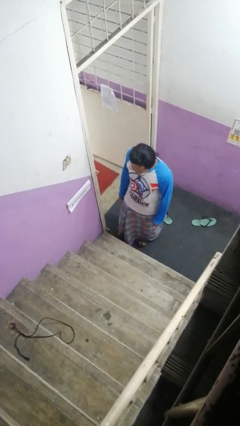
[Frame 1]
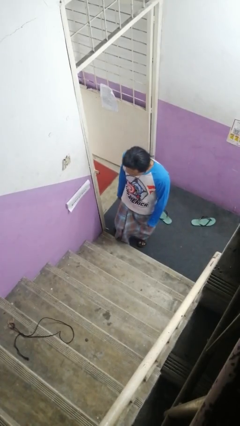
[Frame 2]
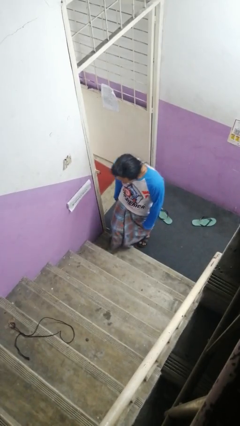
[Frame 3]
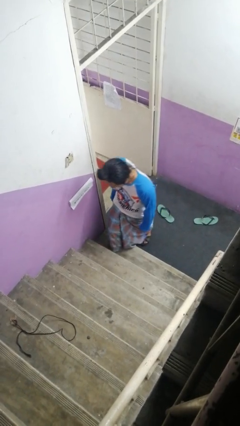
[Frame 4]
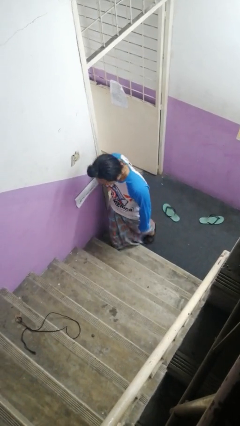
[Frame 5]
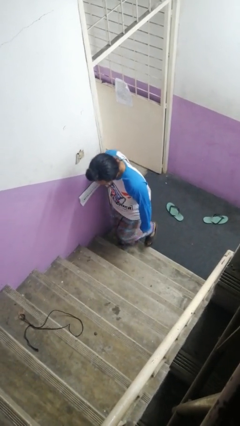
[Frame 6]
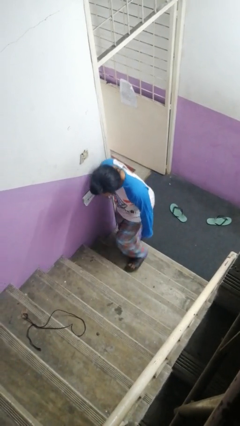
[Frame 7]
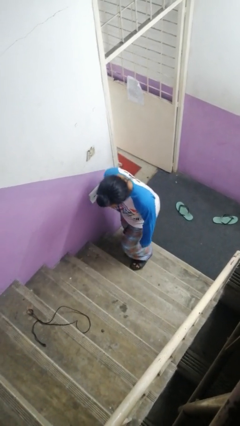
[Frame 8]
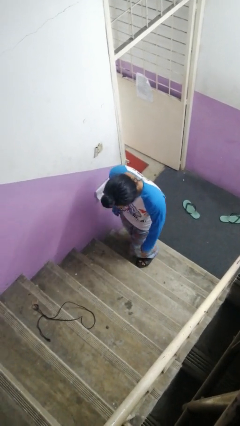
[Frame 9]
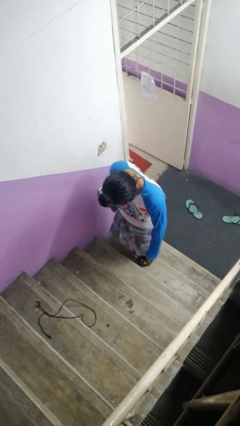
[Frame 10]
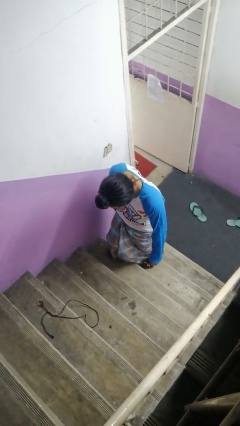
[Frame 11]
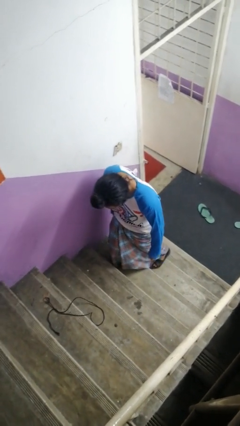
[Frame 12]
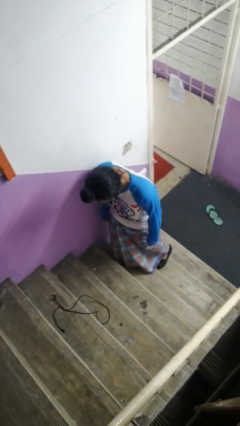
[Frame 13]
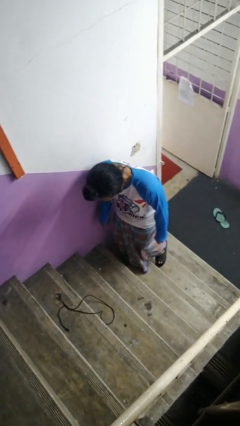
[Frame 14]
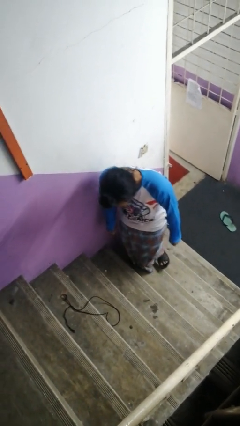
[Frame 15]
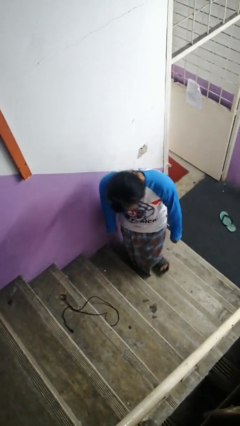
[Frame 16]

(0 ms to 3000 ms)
person climbs up stairs

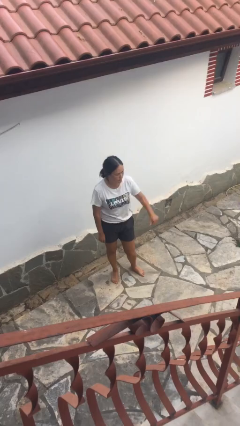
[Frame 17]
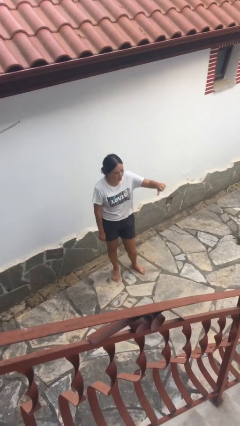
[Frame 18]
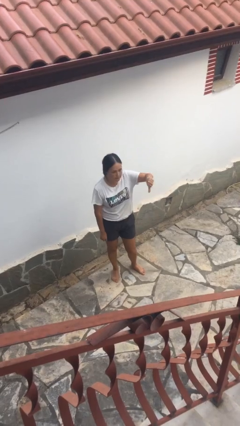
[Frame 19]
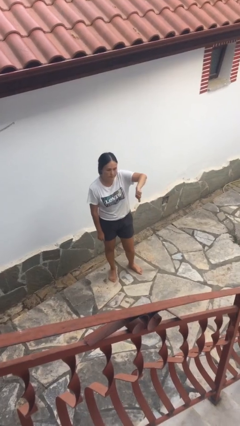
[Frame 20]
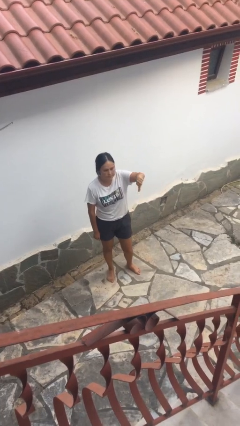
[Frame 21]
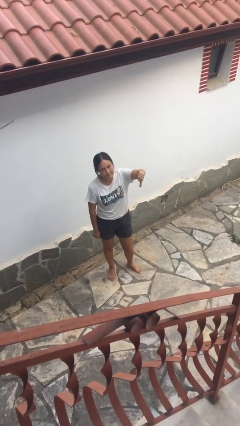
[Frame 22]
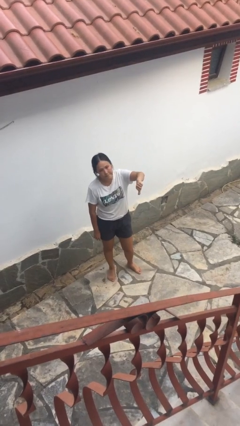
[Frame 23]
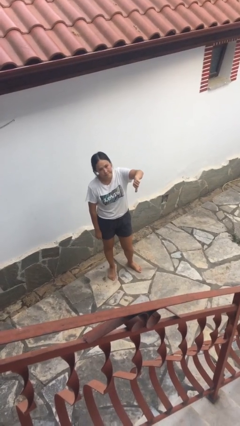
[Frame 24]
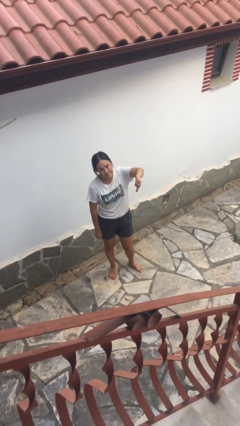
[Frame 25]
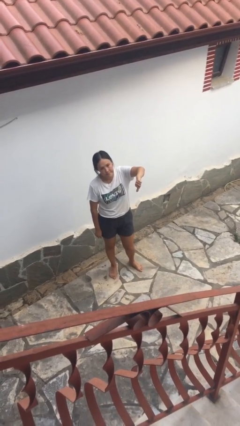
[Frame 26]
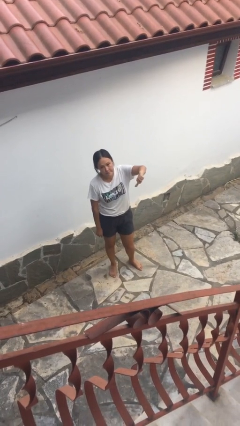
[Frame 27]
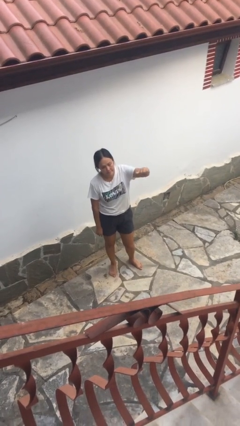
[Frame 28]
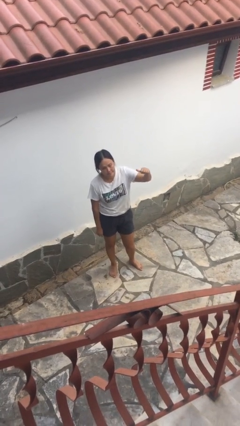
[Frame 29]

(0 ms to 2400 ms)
person gestures thumbs down

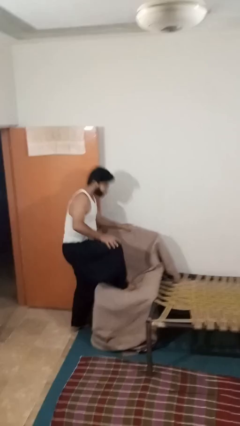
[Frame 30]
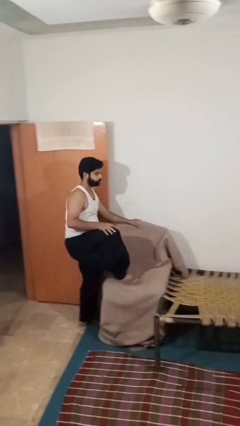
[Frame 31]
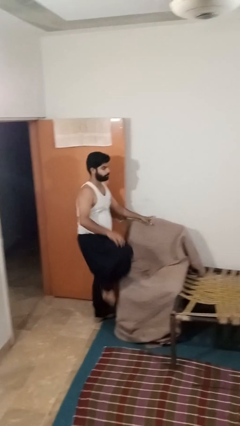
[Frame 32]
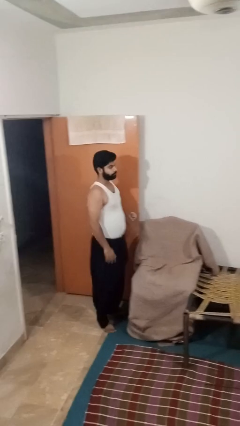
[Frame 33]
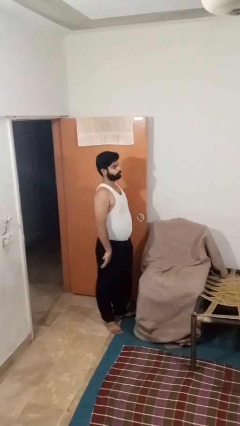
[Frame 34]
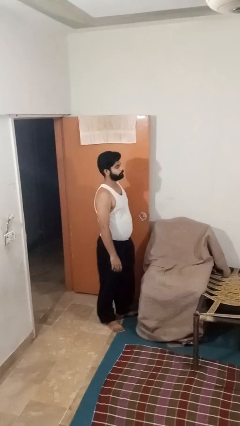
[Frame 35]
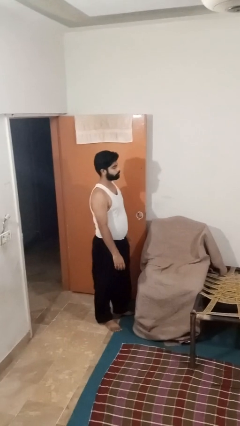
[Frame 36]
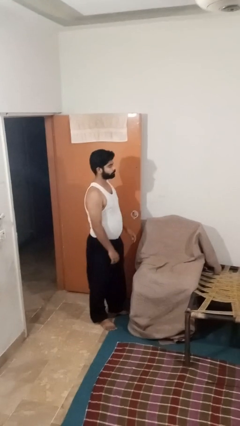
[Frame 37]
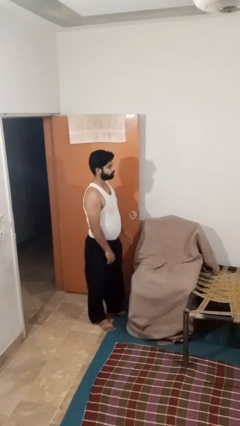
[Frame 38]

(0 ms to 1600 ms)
person climbs off couch

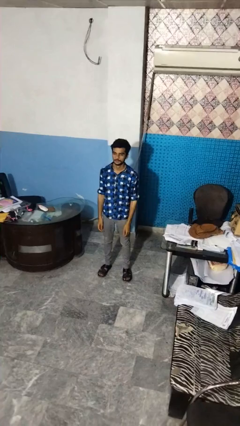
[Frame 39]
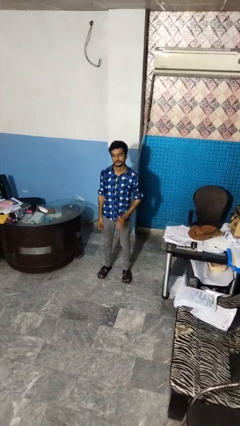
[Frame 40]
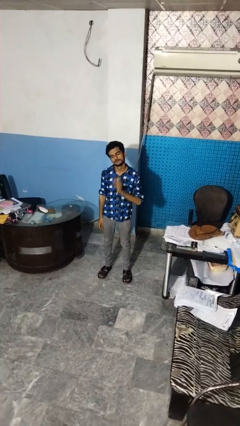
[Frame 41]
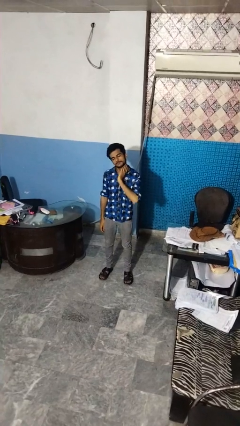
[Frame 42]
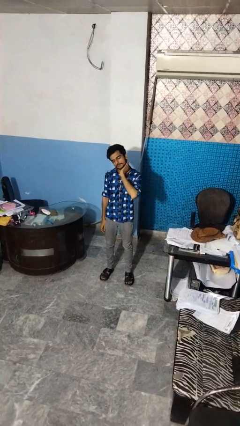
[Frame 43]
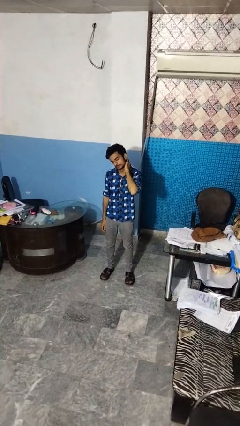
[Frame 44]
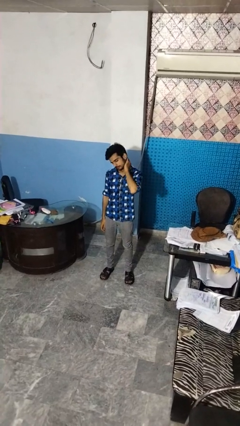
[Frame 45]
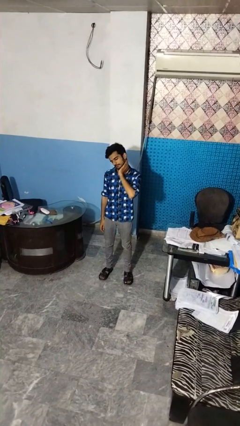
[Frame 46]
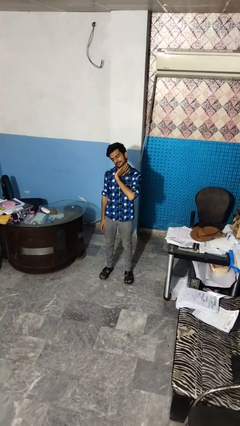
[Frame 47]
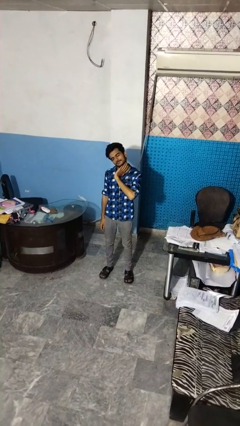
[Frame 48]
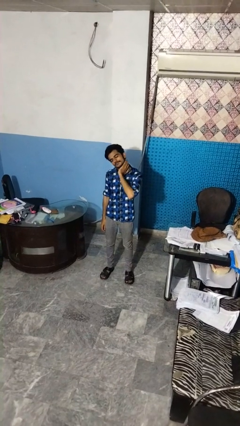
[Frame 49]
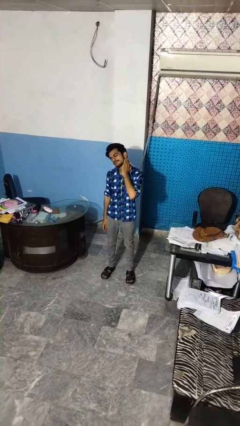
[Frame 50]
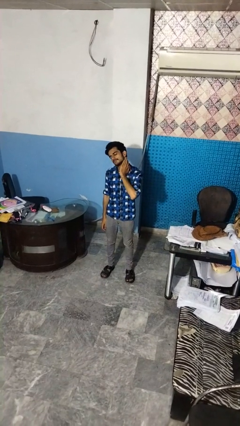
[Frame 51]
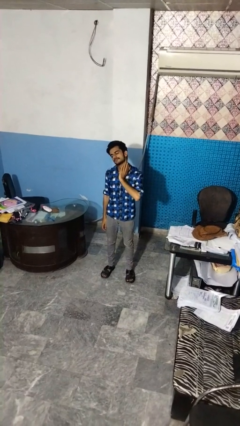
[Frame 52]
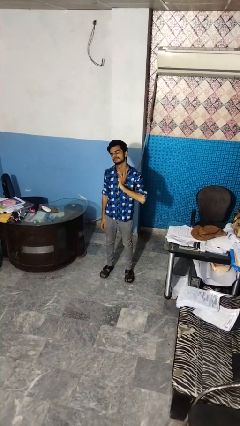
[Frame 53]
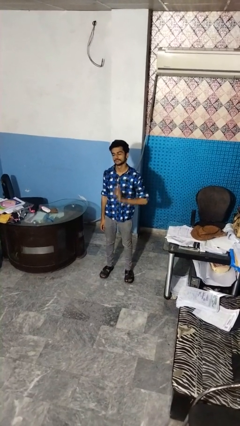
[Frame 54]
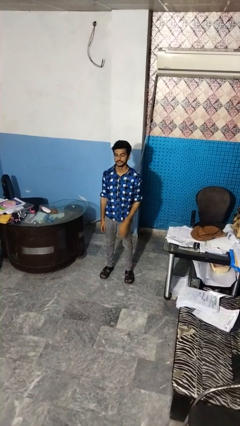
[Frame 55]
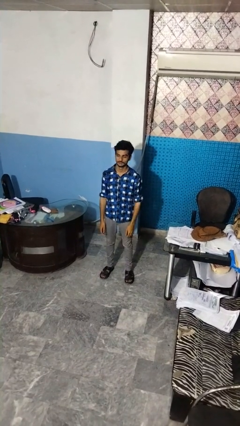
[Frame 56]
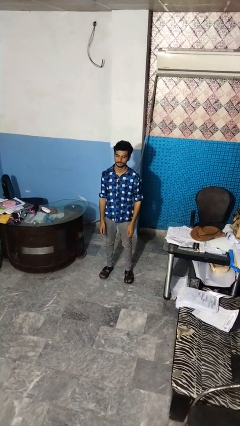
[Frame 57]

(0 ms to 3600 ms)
person rubs neck

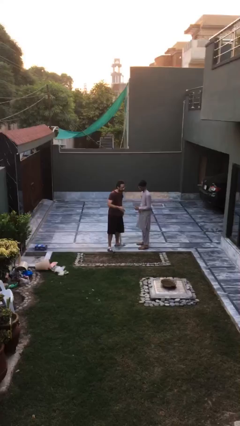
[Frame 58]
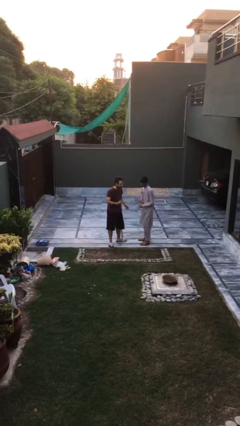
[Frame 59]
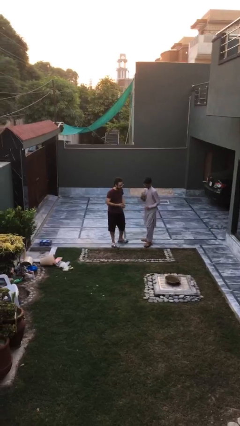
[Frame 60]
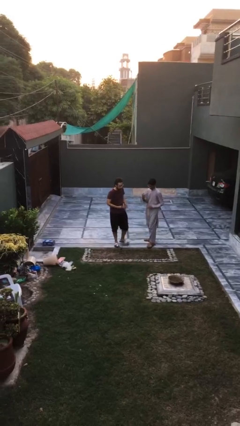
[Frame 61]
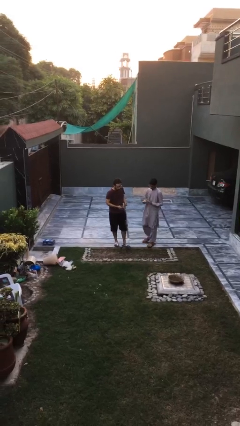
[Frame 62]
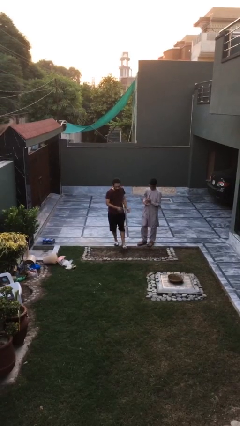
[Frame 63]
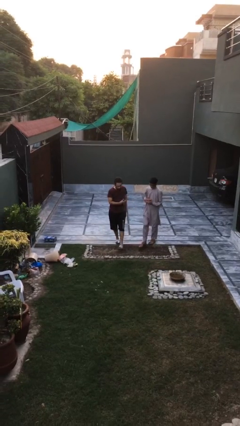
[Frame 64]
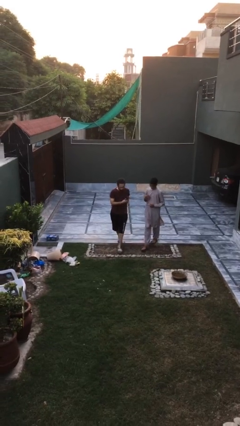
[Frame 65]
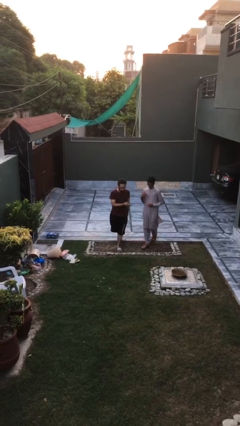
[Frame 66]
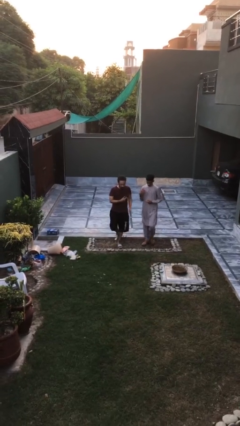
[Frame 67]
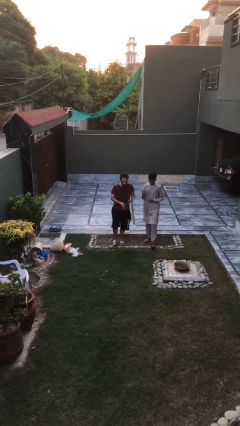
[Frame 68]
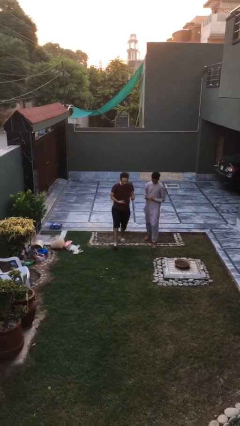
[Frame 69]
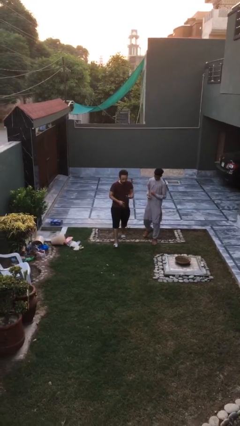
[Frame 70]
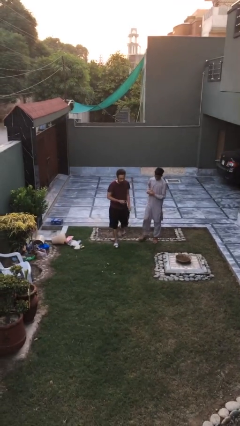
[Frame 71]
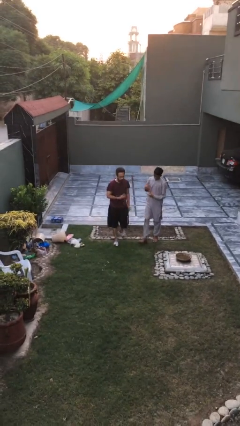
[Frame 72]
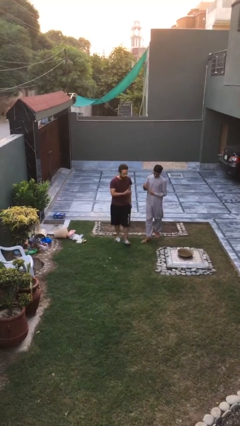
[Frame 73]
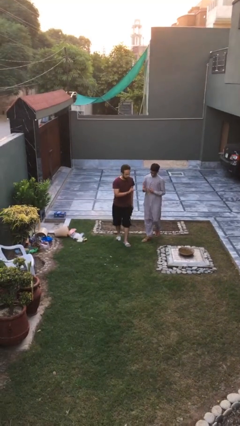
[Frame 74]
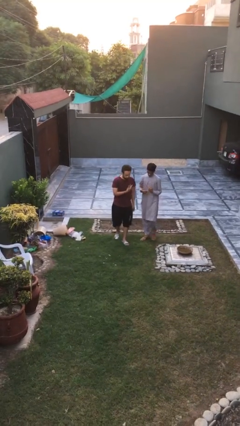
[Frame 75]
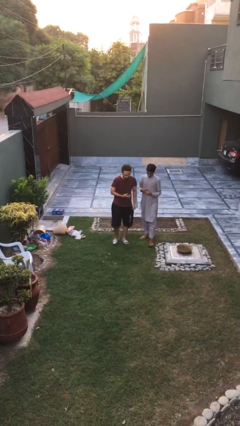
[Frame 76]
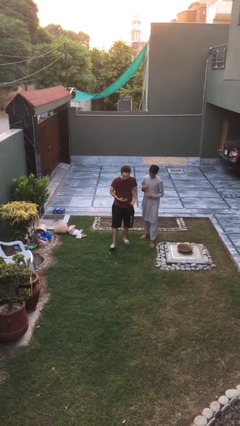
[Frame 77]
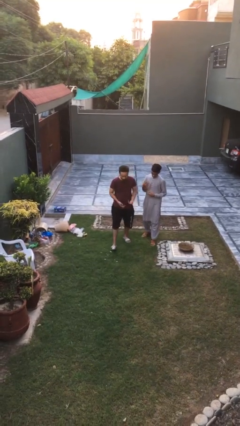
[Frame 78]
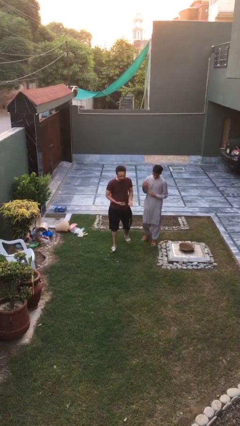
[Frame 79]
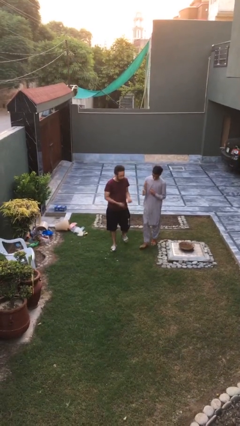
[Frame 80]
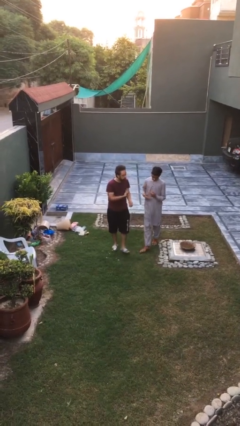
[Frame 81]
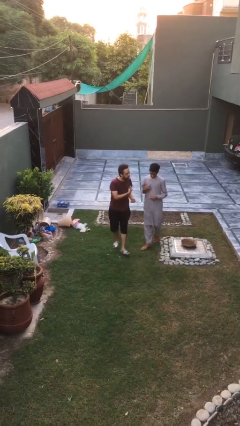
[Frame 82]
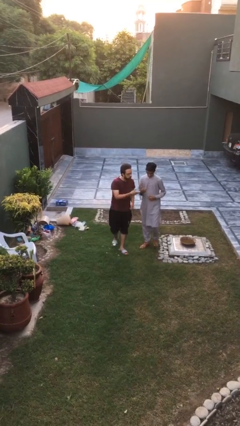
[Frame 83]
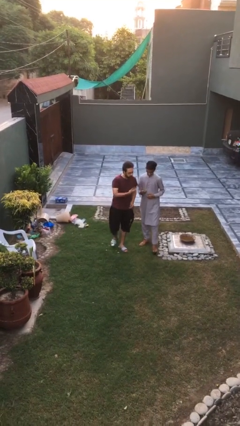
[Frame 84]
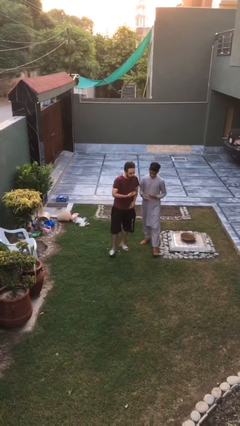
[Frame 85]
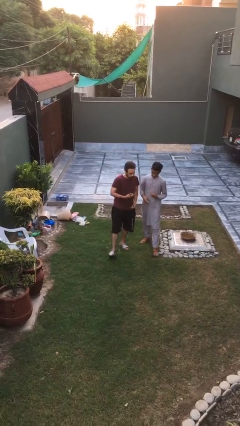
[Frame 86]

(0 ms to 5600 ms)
person talks to person

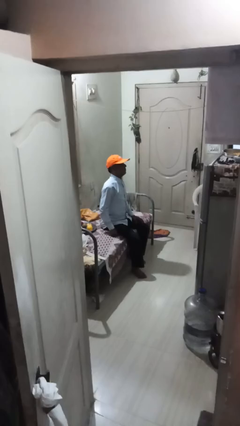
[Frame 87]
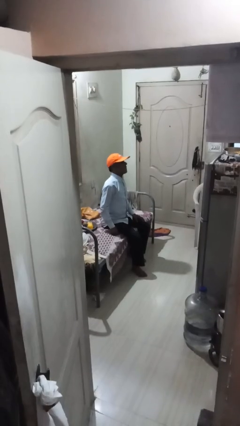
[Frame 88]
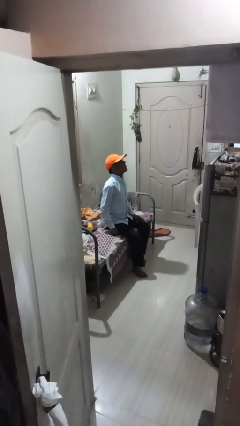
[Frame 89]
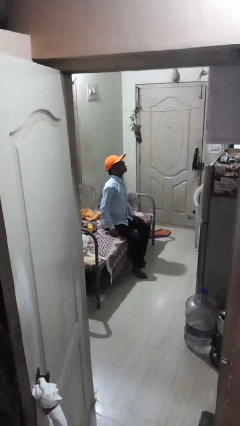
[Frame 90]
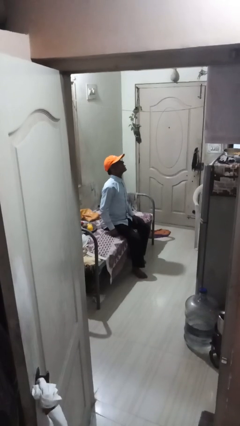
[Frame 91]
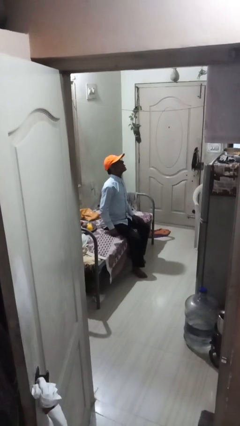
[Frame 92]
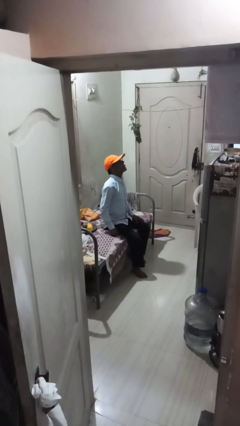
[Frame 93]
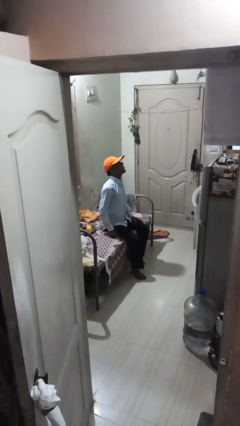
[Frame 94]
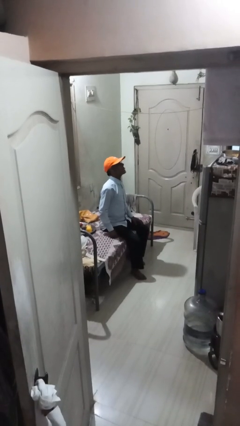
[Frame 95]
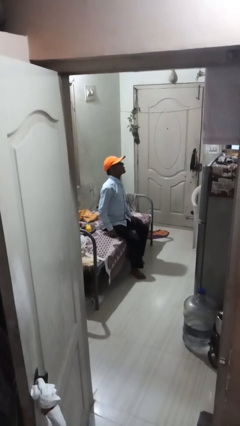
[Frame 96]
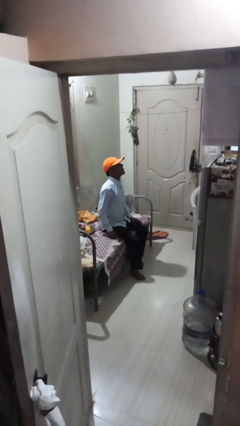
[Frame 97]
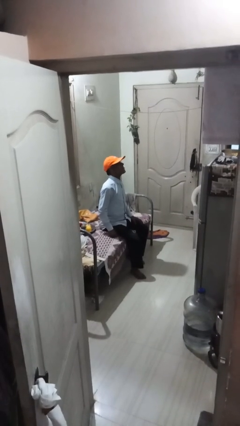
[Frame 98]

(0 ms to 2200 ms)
person sticks out tongue
